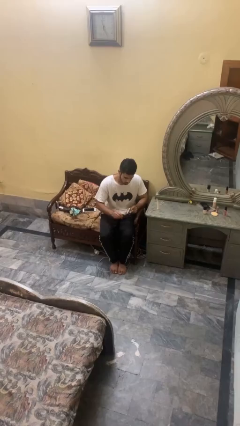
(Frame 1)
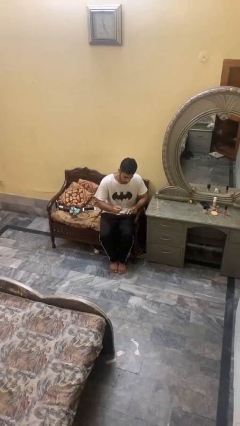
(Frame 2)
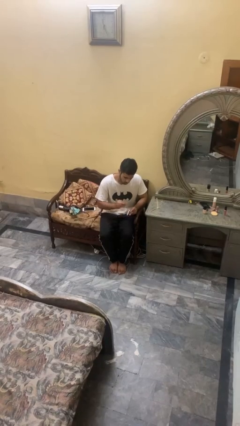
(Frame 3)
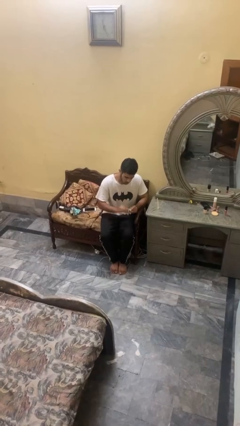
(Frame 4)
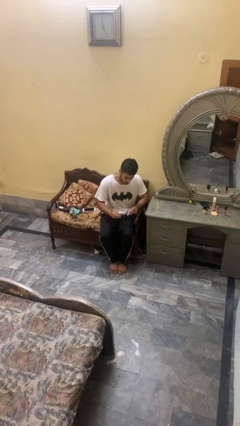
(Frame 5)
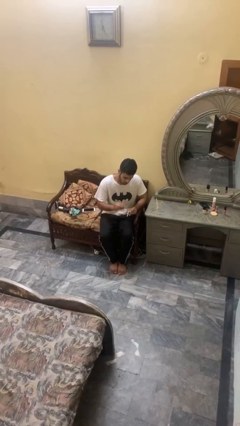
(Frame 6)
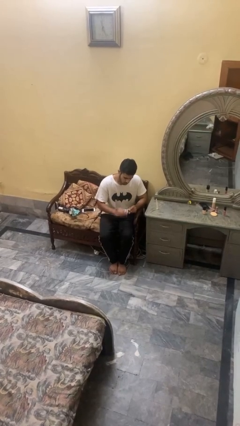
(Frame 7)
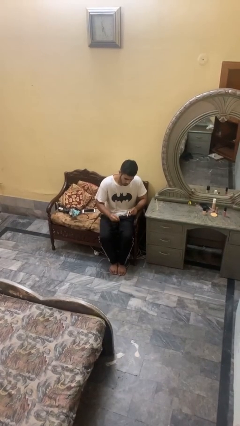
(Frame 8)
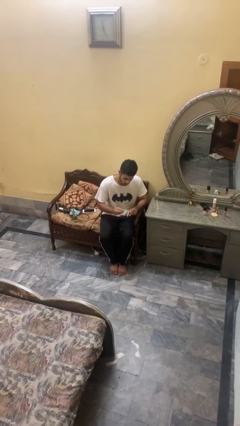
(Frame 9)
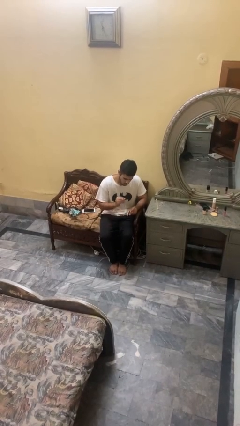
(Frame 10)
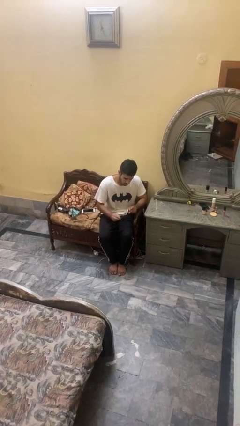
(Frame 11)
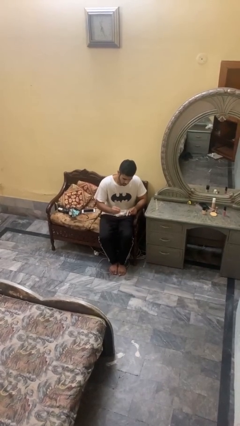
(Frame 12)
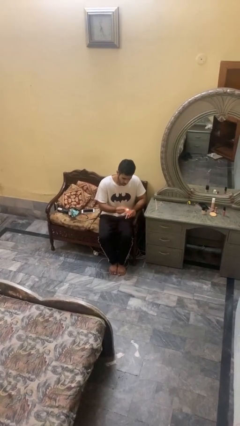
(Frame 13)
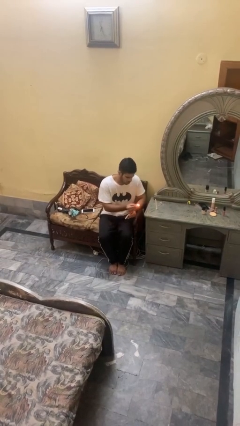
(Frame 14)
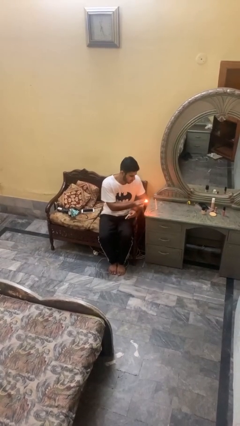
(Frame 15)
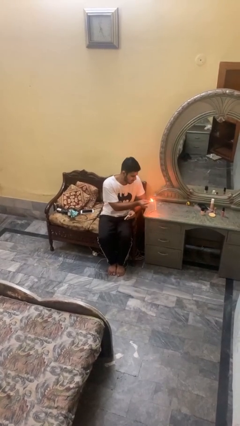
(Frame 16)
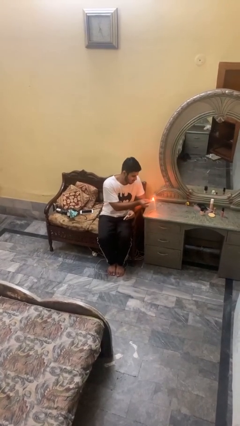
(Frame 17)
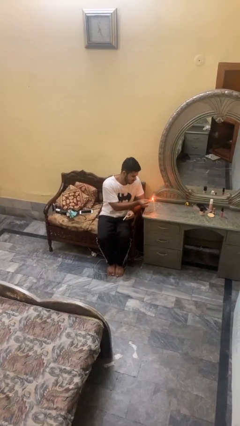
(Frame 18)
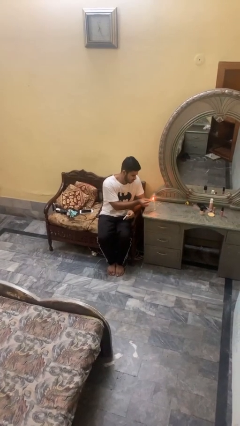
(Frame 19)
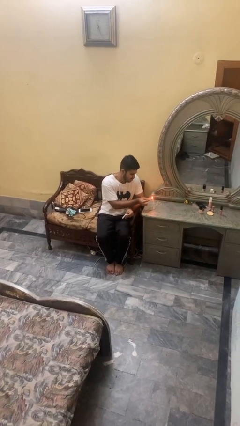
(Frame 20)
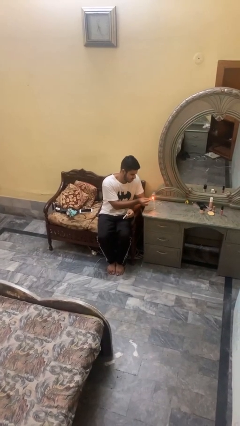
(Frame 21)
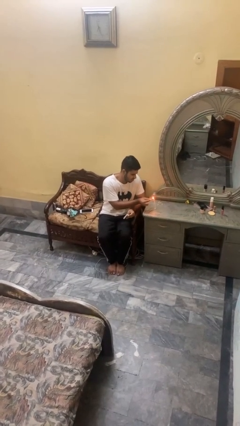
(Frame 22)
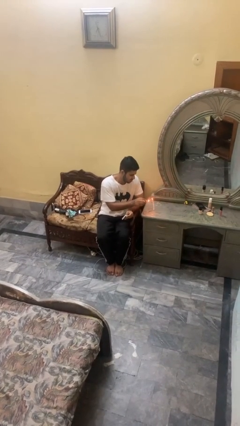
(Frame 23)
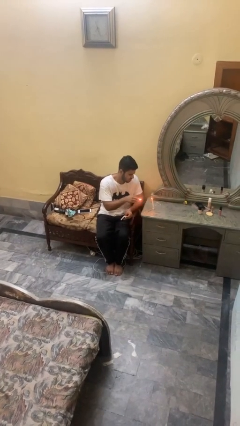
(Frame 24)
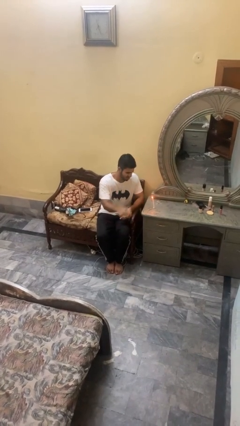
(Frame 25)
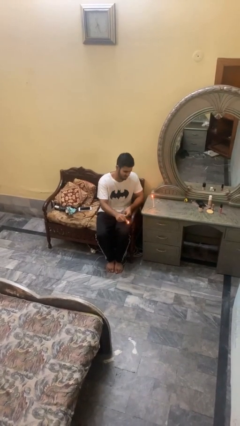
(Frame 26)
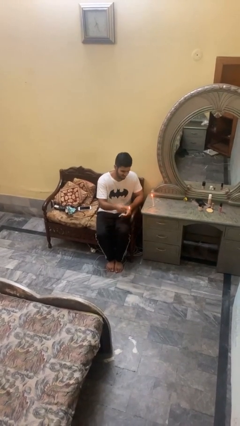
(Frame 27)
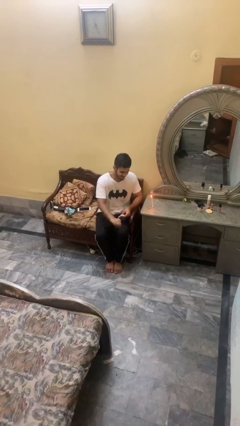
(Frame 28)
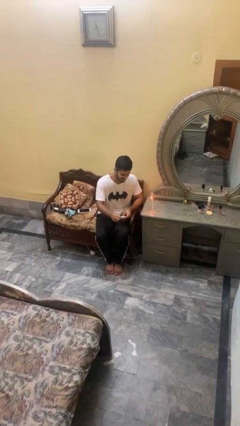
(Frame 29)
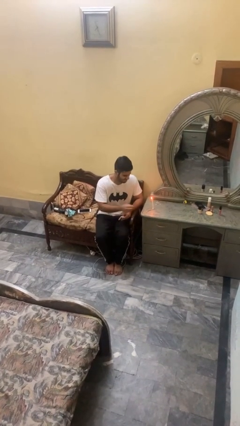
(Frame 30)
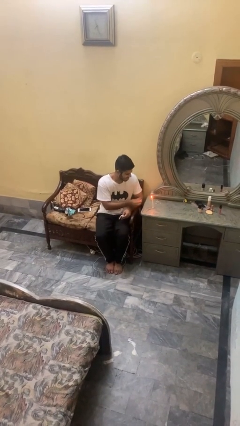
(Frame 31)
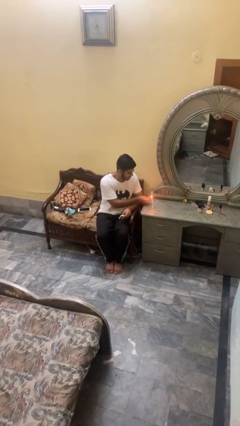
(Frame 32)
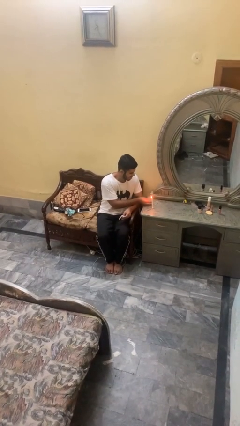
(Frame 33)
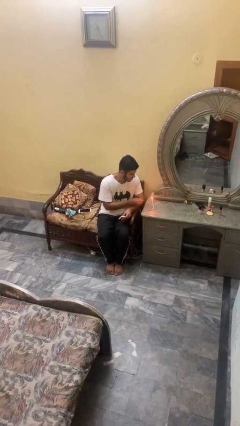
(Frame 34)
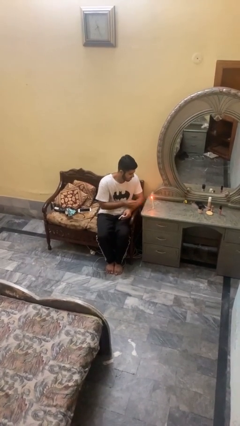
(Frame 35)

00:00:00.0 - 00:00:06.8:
person lights candle

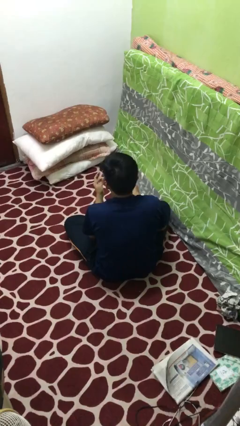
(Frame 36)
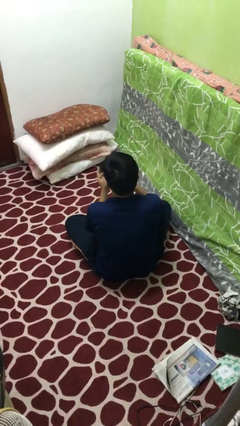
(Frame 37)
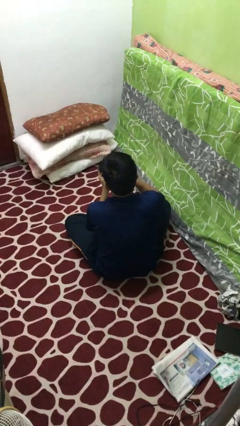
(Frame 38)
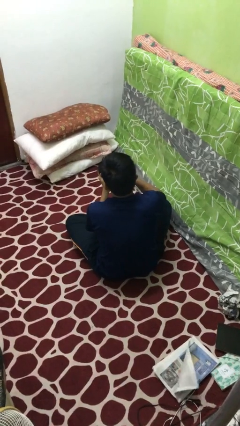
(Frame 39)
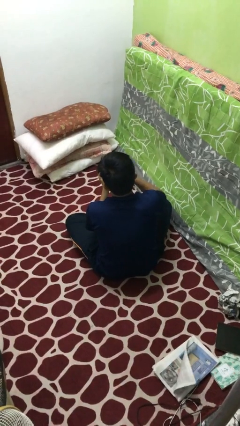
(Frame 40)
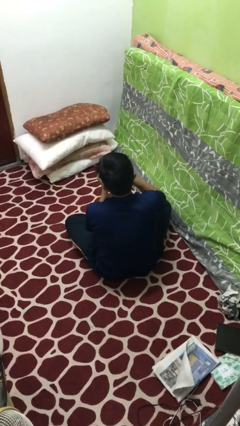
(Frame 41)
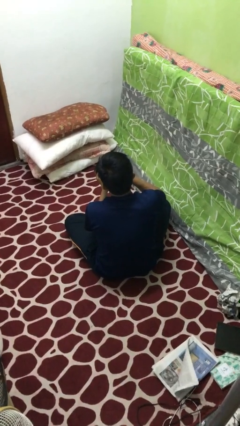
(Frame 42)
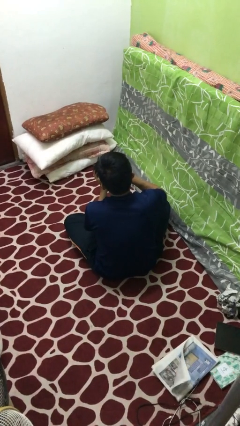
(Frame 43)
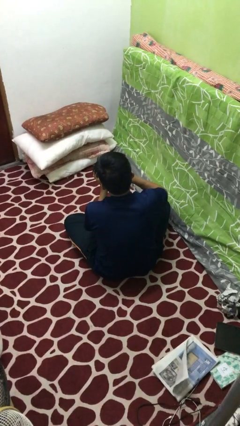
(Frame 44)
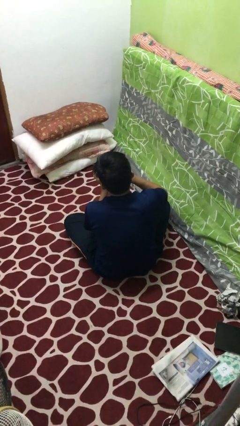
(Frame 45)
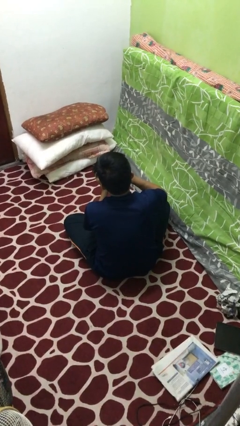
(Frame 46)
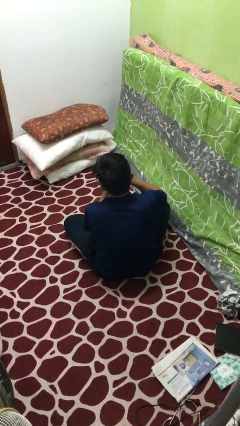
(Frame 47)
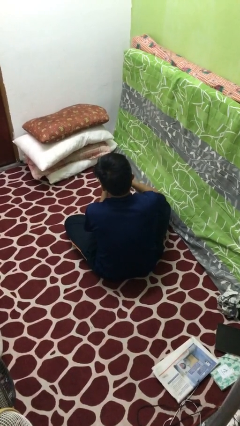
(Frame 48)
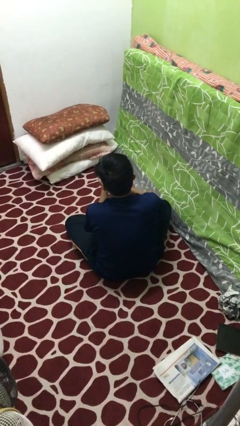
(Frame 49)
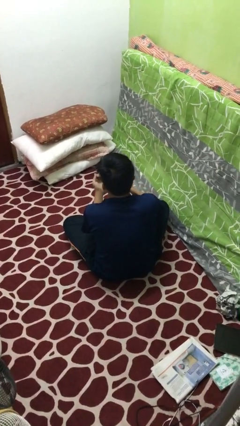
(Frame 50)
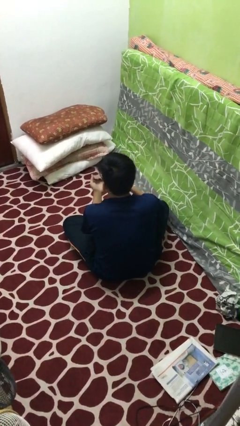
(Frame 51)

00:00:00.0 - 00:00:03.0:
person clips fingernails

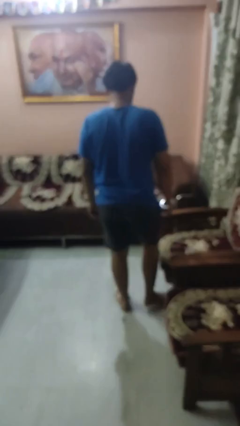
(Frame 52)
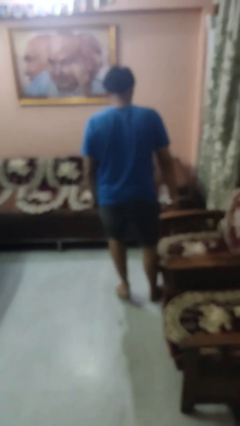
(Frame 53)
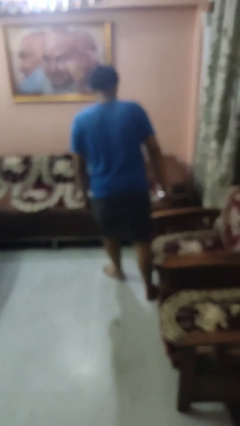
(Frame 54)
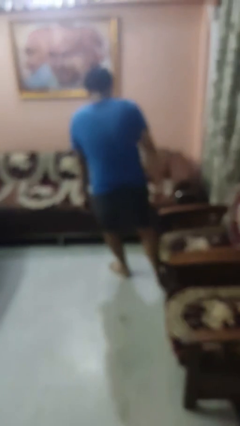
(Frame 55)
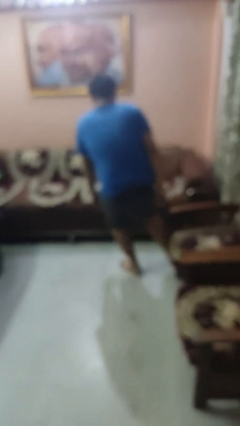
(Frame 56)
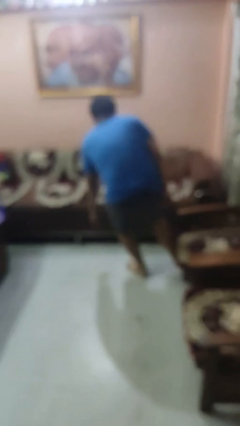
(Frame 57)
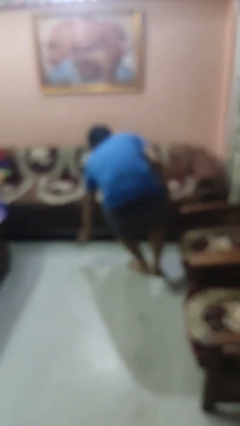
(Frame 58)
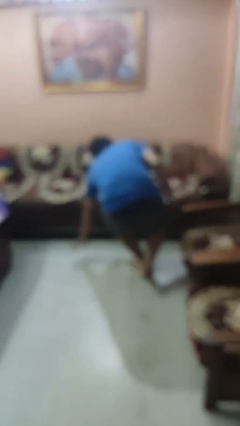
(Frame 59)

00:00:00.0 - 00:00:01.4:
person trips on object on floor

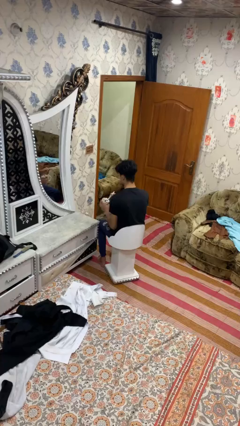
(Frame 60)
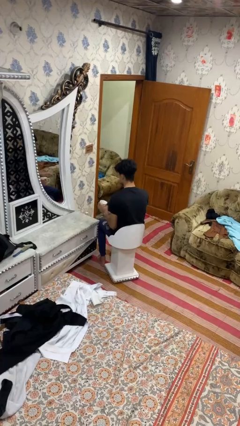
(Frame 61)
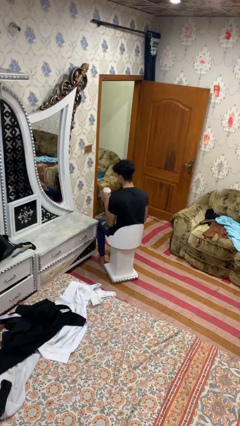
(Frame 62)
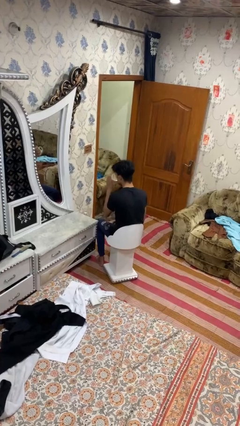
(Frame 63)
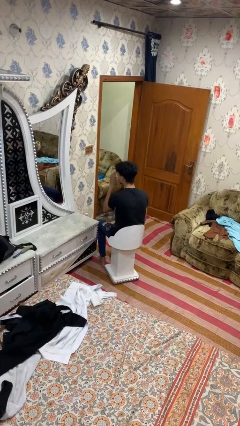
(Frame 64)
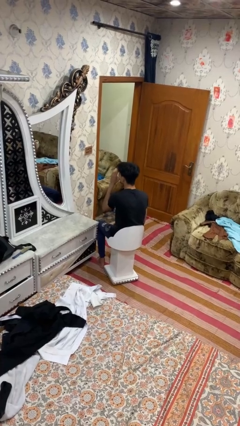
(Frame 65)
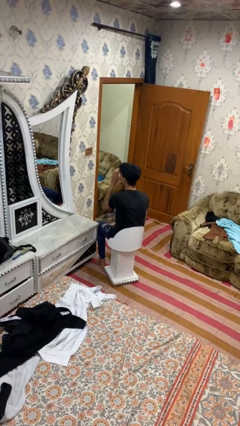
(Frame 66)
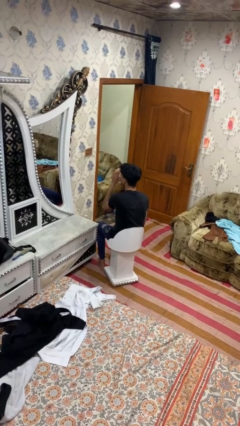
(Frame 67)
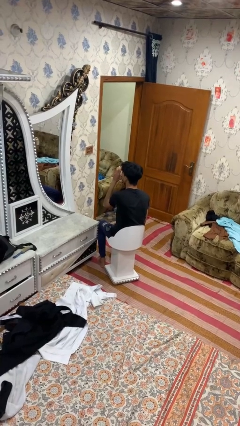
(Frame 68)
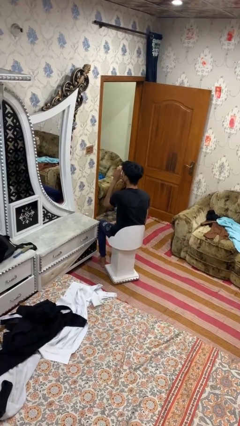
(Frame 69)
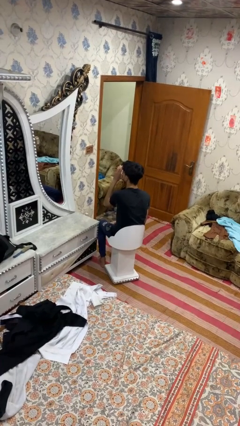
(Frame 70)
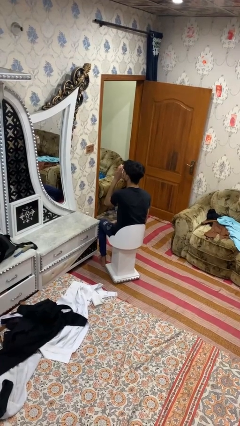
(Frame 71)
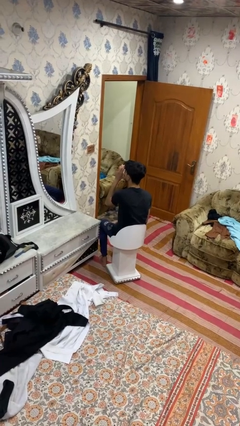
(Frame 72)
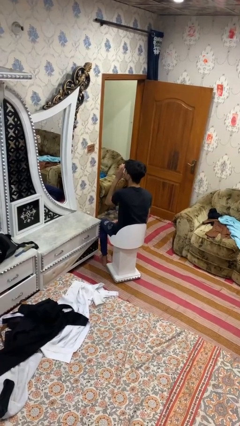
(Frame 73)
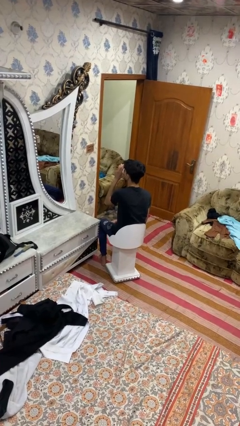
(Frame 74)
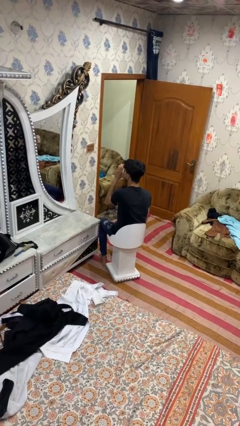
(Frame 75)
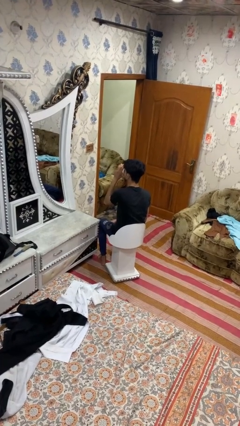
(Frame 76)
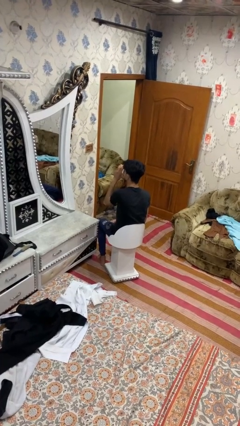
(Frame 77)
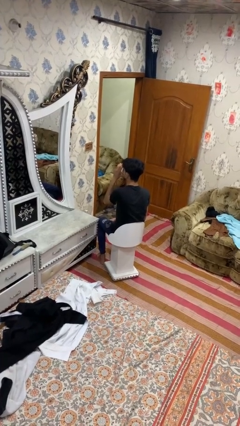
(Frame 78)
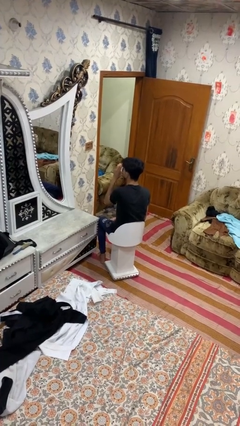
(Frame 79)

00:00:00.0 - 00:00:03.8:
person drinks from mug

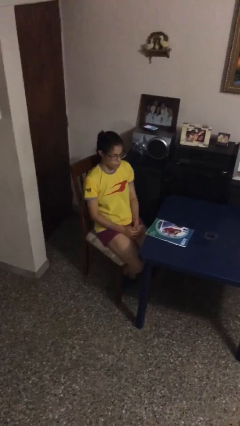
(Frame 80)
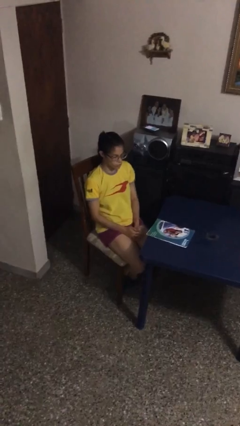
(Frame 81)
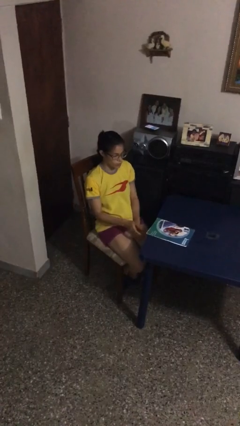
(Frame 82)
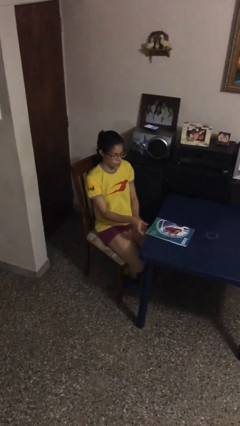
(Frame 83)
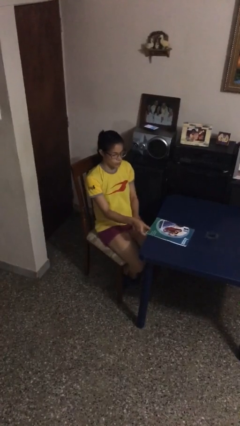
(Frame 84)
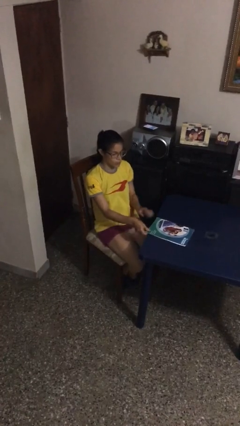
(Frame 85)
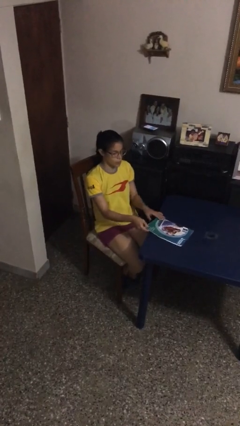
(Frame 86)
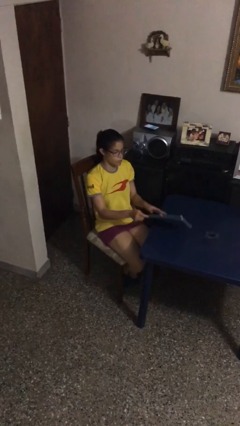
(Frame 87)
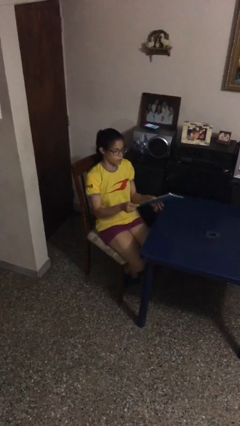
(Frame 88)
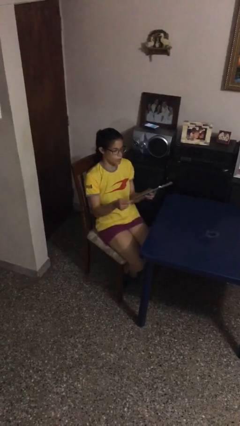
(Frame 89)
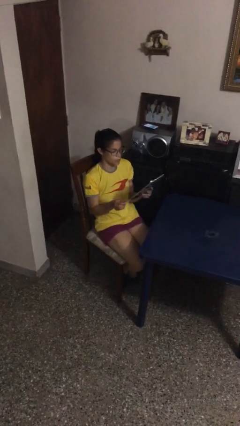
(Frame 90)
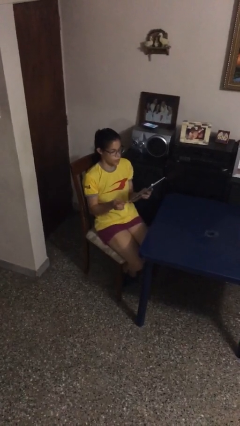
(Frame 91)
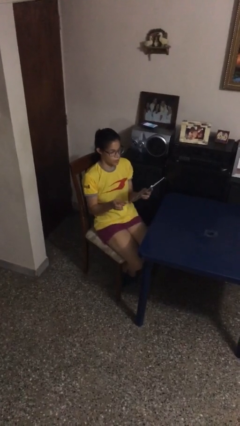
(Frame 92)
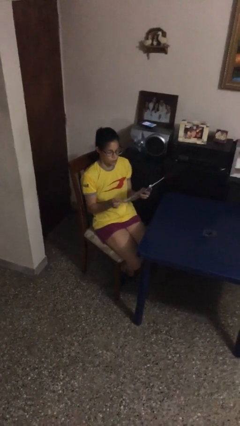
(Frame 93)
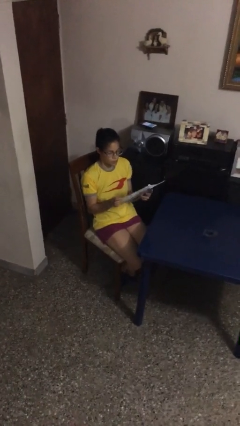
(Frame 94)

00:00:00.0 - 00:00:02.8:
person picks up object from table
